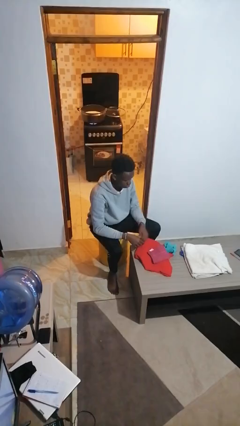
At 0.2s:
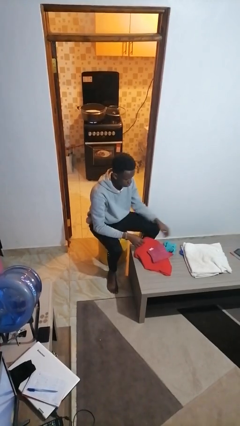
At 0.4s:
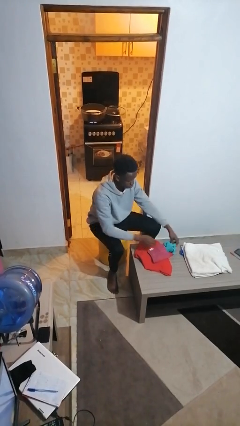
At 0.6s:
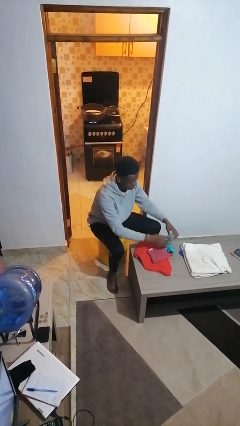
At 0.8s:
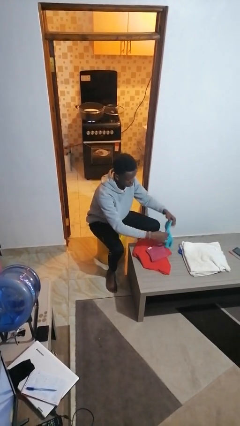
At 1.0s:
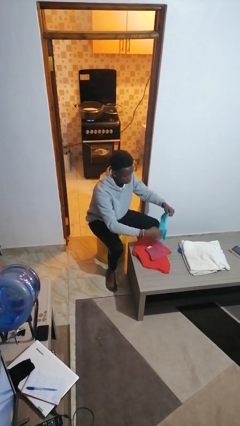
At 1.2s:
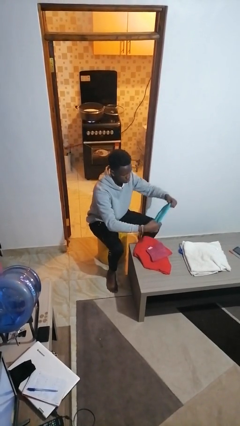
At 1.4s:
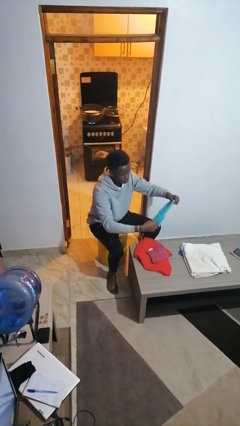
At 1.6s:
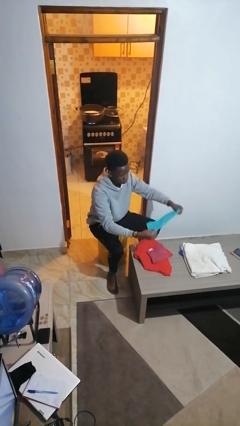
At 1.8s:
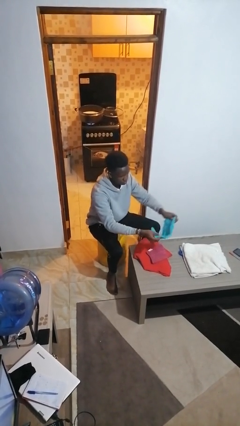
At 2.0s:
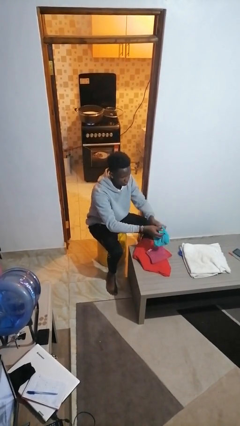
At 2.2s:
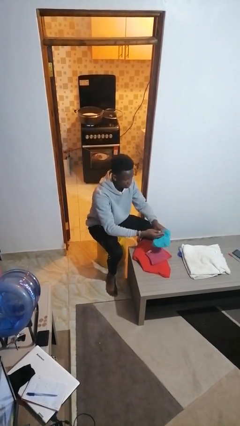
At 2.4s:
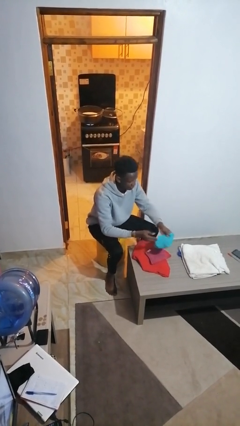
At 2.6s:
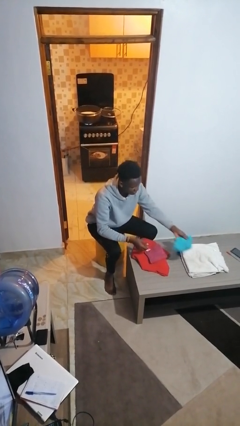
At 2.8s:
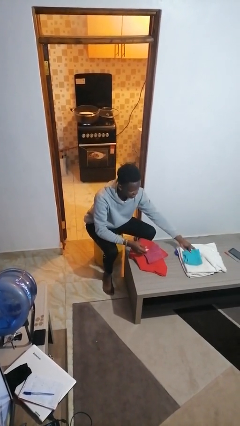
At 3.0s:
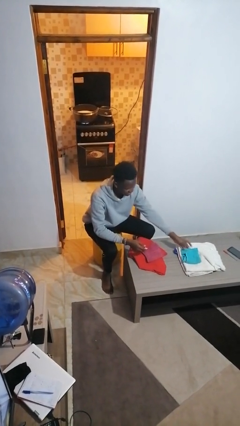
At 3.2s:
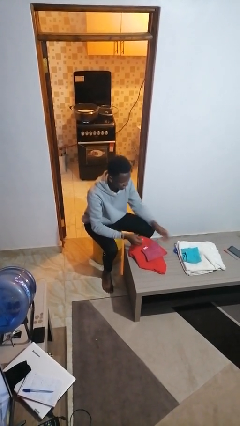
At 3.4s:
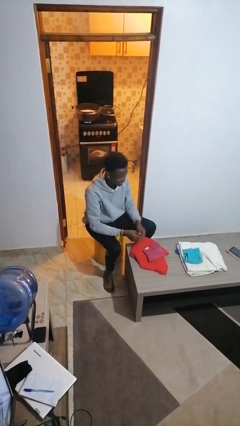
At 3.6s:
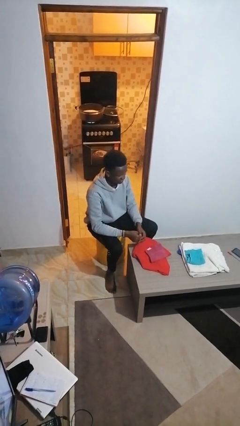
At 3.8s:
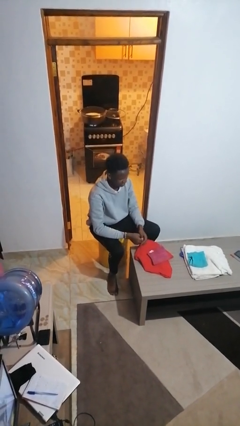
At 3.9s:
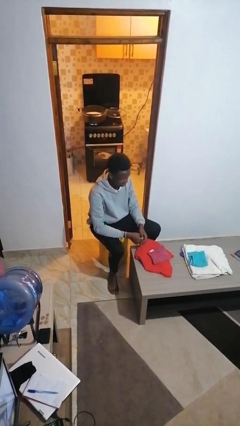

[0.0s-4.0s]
person folds towel

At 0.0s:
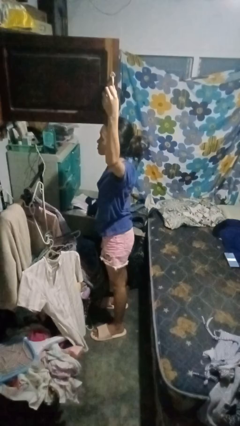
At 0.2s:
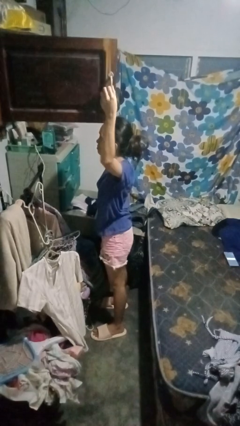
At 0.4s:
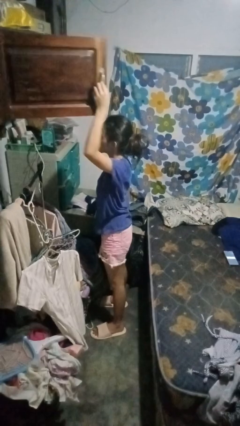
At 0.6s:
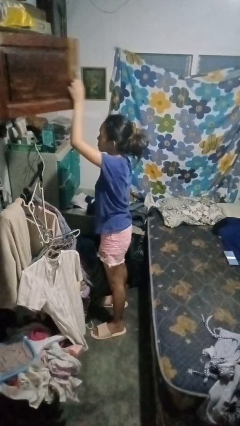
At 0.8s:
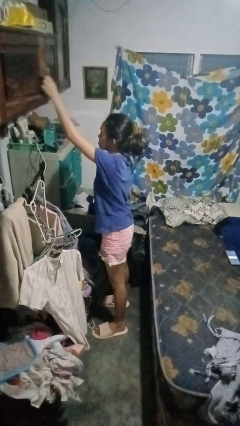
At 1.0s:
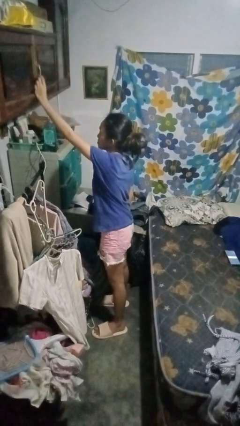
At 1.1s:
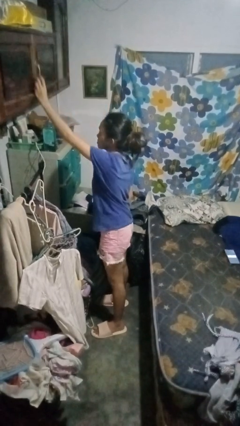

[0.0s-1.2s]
person closes closet door

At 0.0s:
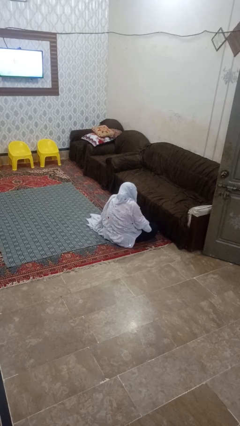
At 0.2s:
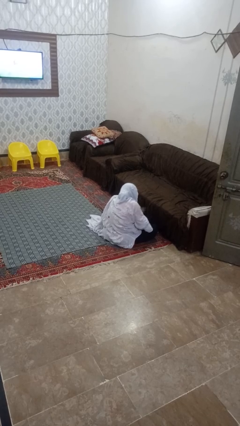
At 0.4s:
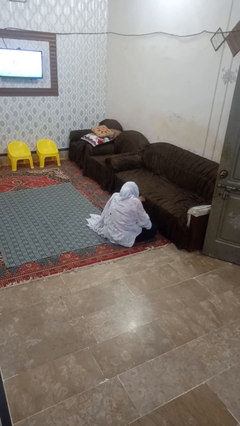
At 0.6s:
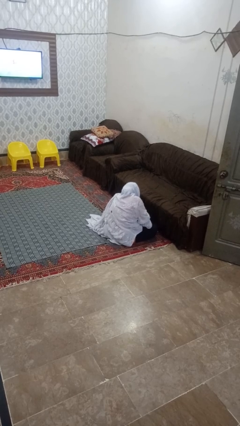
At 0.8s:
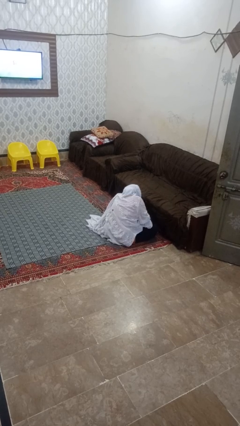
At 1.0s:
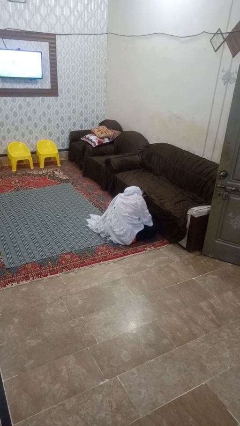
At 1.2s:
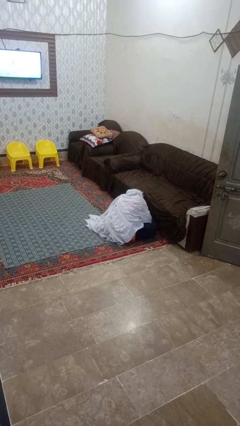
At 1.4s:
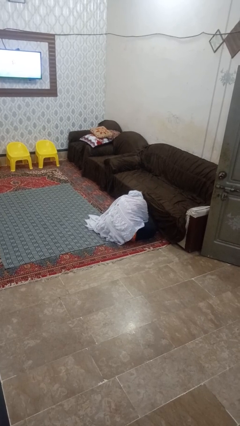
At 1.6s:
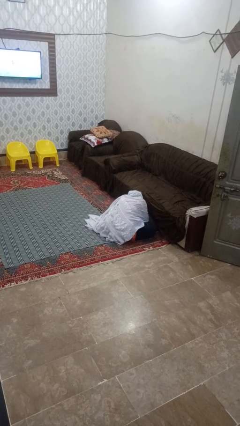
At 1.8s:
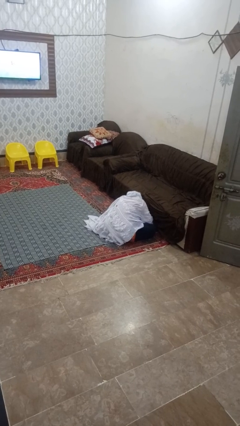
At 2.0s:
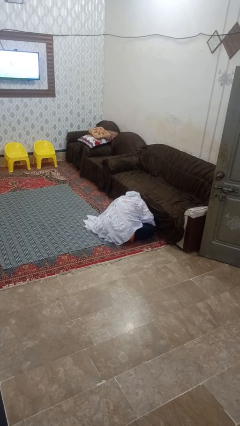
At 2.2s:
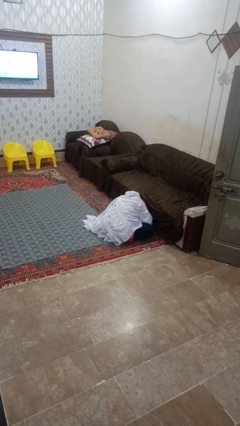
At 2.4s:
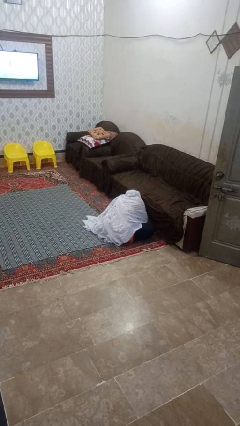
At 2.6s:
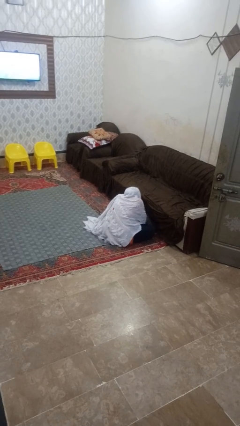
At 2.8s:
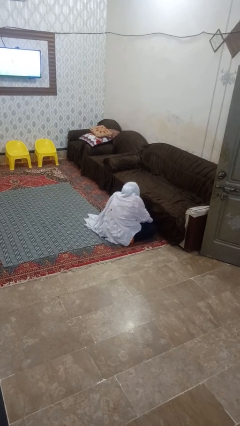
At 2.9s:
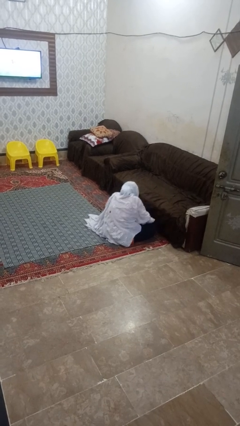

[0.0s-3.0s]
person searches under couch

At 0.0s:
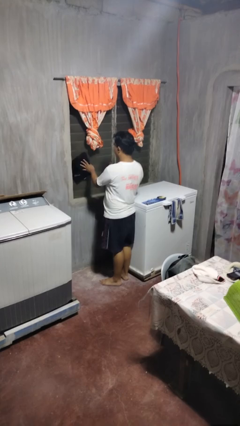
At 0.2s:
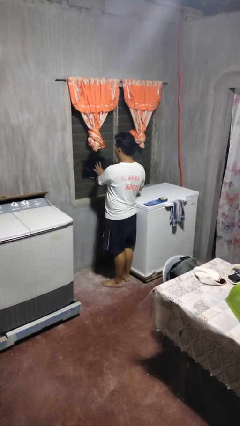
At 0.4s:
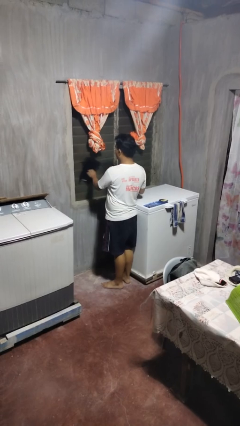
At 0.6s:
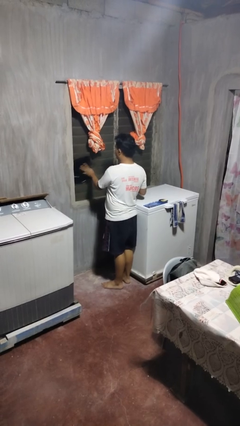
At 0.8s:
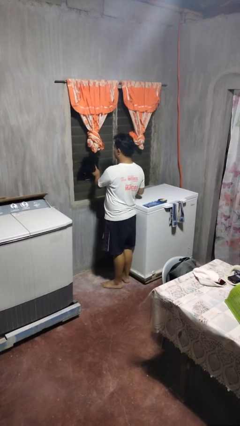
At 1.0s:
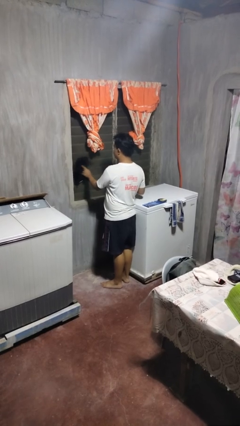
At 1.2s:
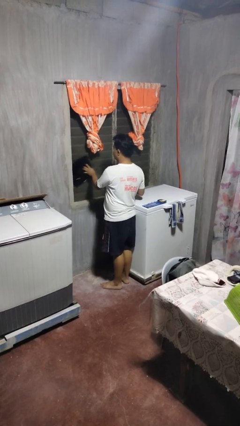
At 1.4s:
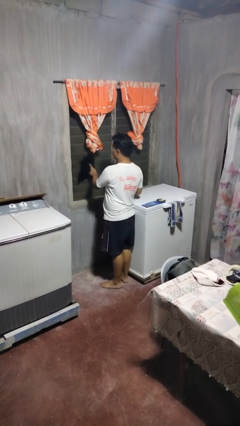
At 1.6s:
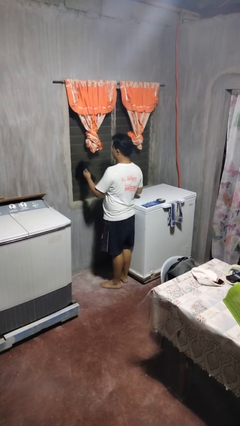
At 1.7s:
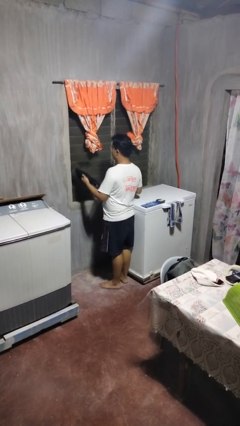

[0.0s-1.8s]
person washes window

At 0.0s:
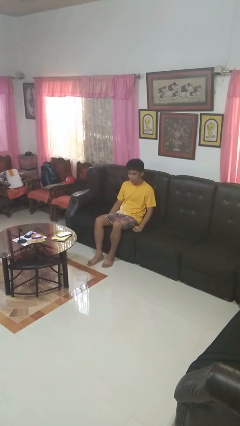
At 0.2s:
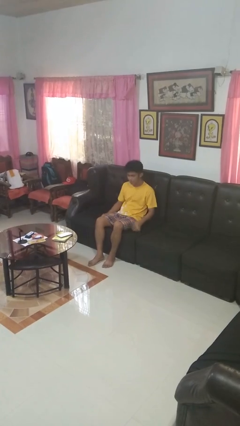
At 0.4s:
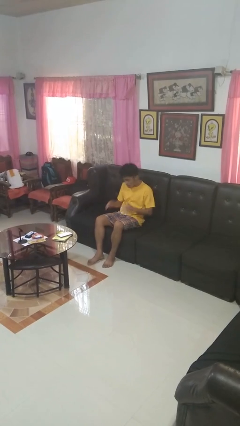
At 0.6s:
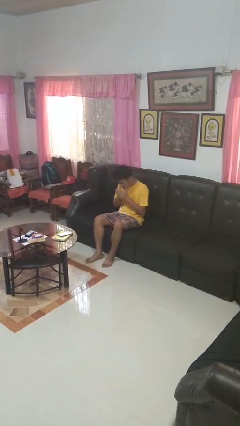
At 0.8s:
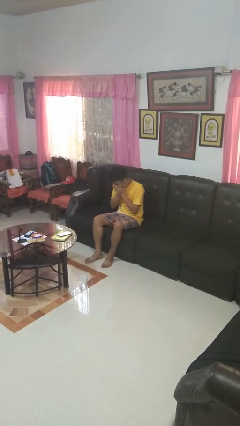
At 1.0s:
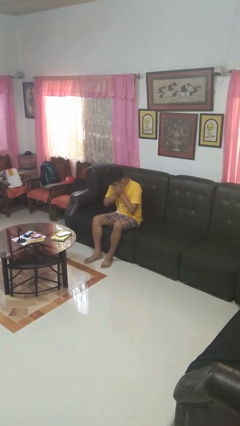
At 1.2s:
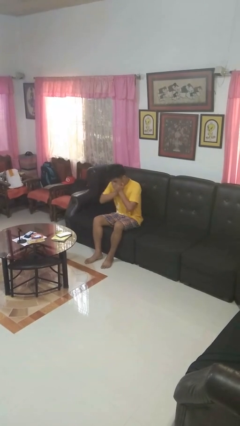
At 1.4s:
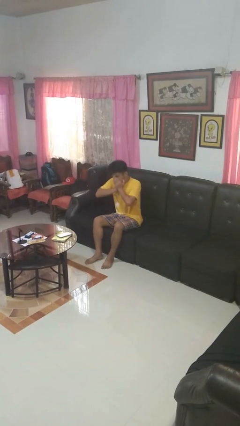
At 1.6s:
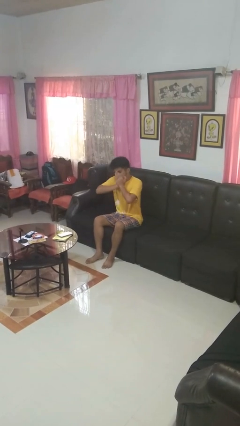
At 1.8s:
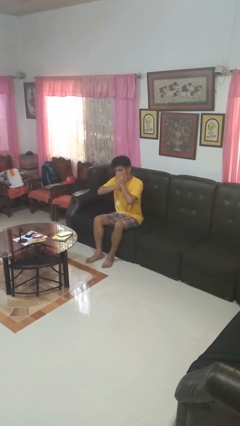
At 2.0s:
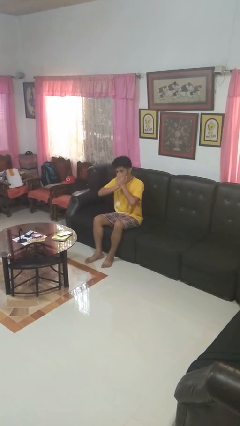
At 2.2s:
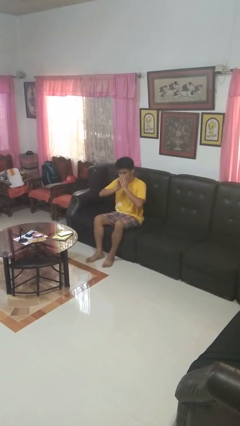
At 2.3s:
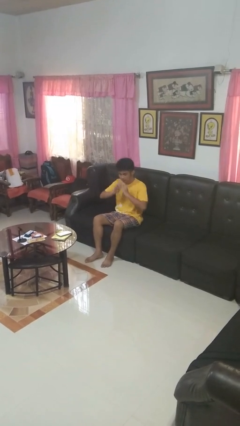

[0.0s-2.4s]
person yawns

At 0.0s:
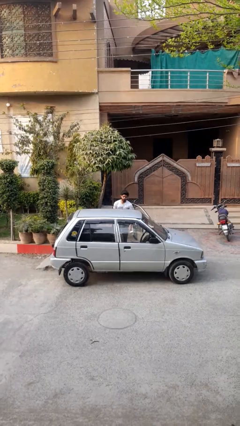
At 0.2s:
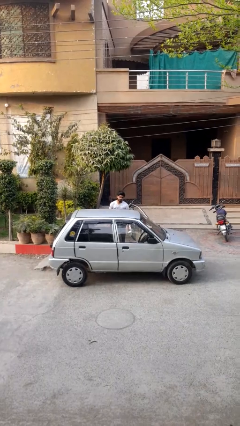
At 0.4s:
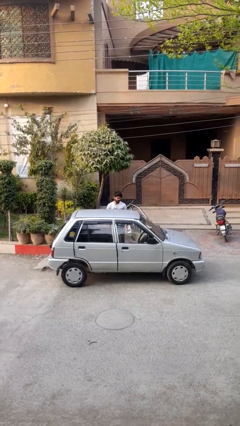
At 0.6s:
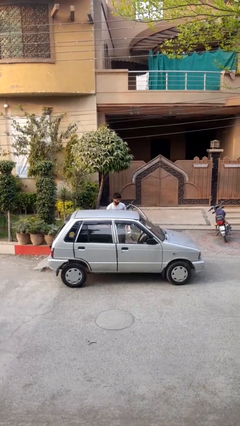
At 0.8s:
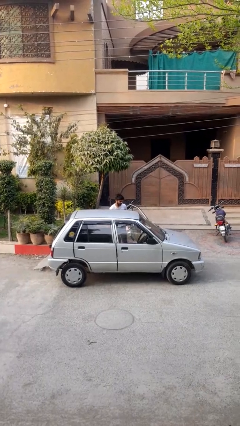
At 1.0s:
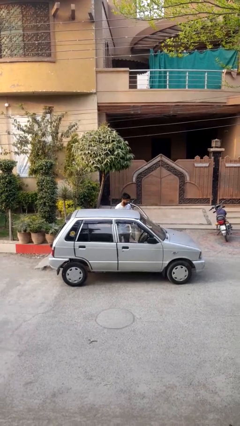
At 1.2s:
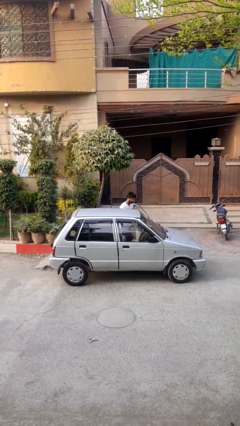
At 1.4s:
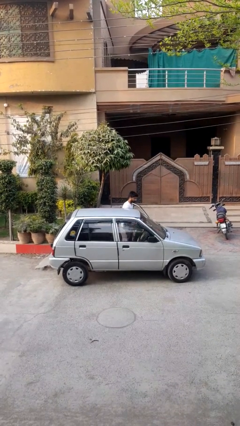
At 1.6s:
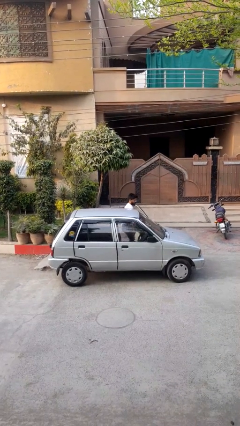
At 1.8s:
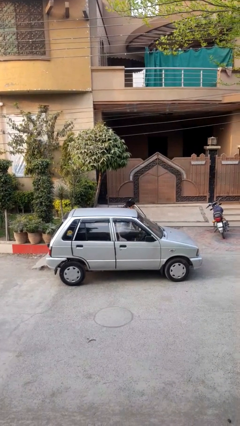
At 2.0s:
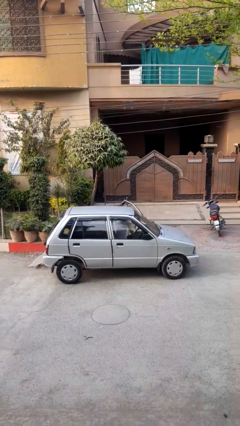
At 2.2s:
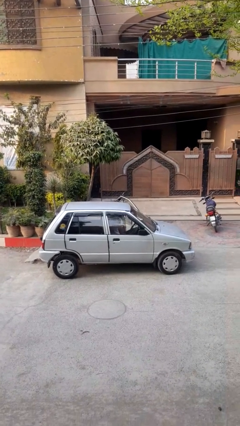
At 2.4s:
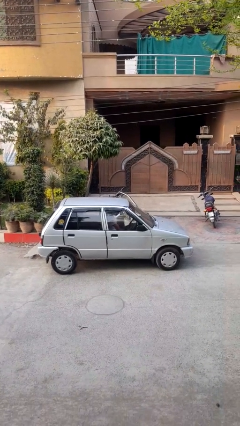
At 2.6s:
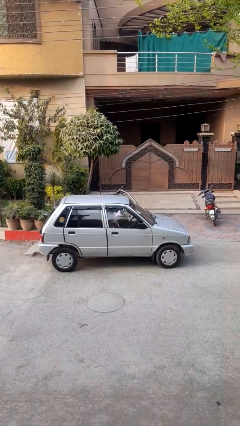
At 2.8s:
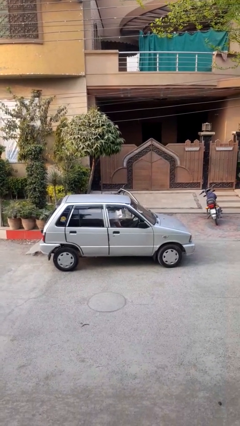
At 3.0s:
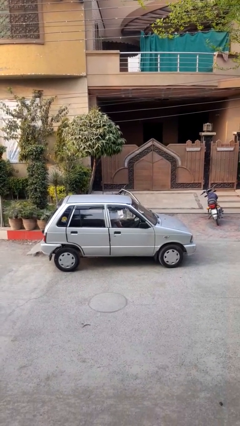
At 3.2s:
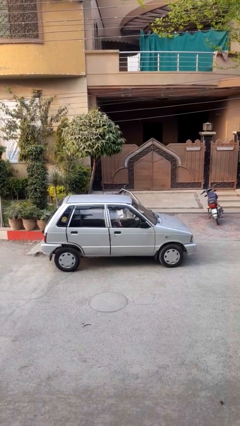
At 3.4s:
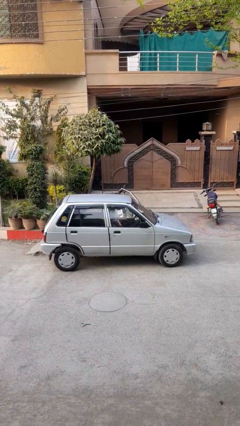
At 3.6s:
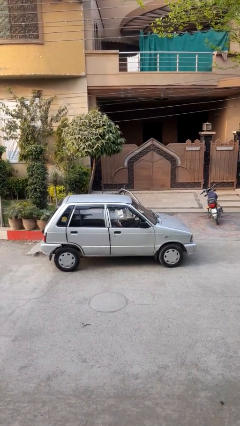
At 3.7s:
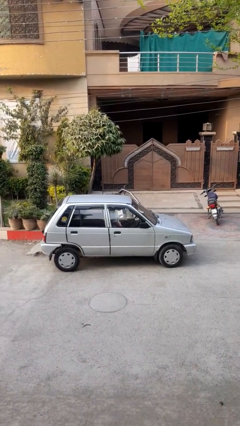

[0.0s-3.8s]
person enters car

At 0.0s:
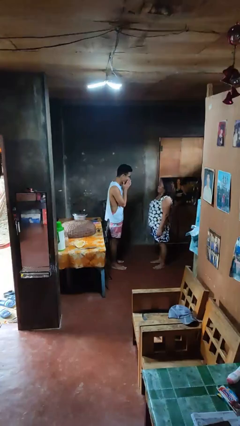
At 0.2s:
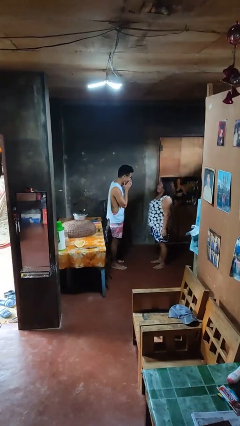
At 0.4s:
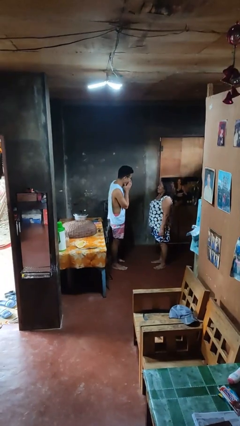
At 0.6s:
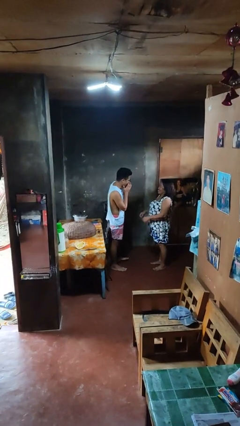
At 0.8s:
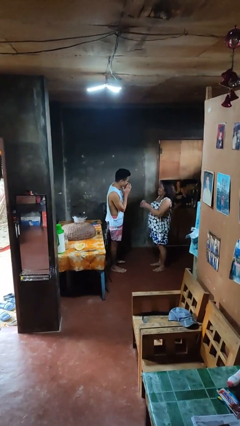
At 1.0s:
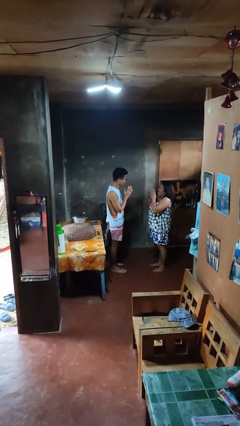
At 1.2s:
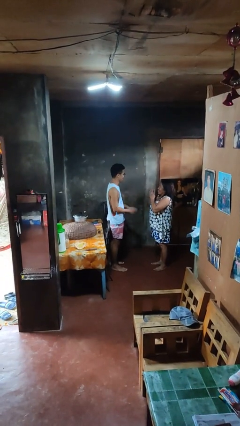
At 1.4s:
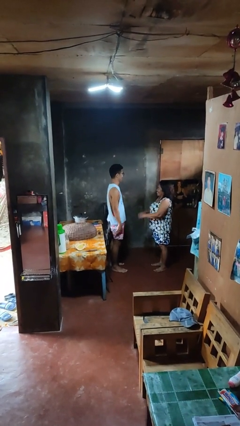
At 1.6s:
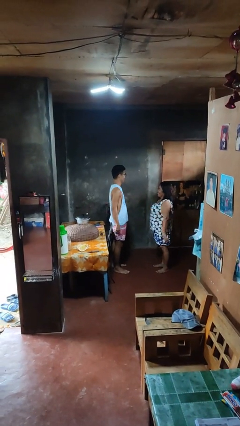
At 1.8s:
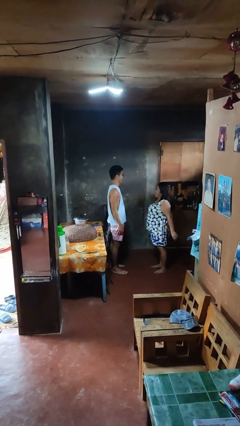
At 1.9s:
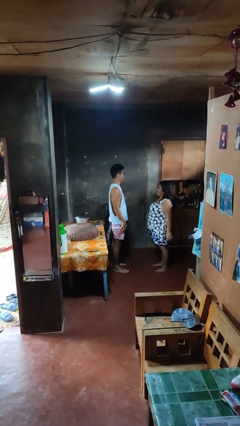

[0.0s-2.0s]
person laughs with person
